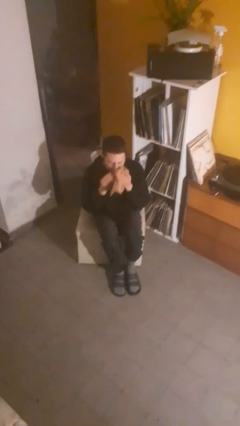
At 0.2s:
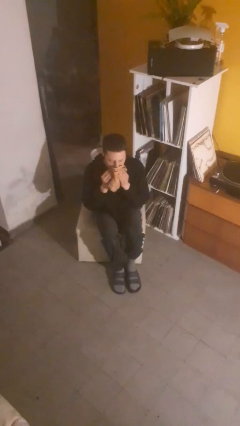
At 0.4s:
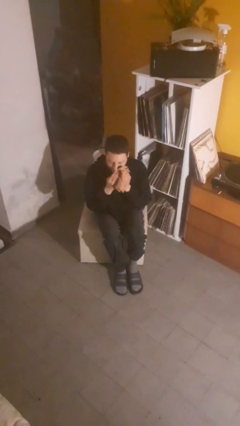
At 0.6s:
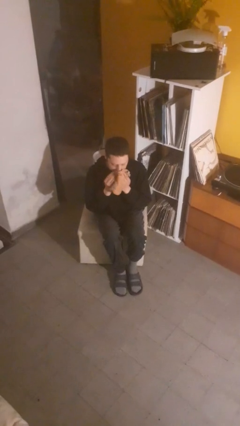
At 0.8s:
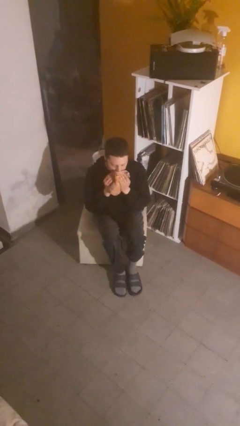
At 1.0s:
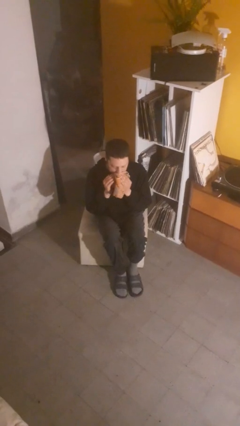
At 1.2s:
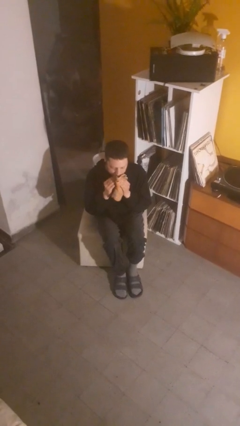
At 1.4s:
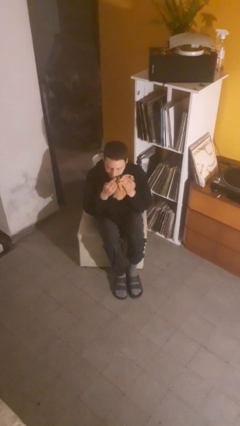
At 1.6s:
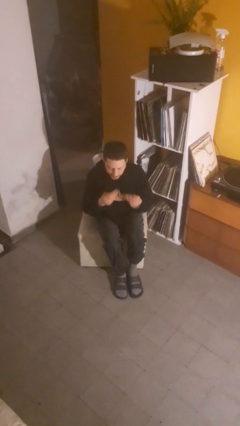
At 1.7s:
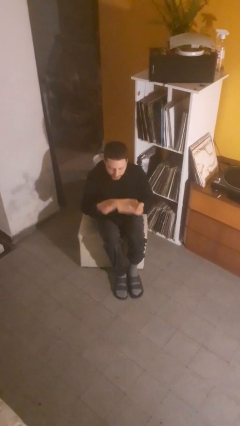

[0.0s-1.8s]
person wipes mouth with napkin

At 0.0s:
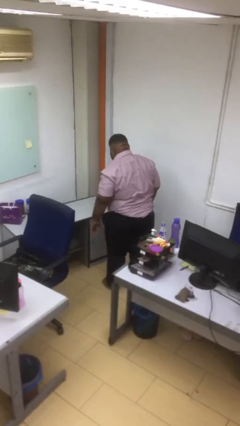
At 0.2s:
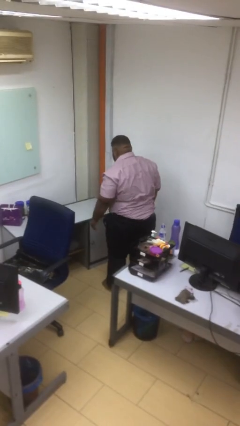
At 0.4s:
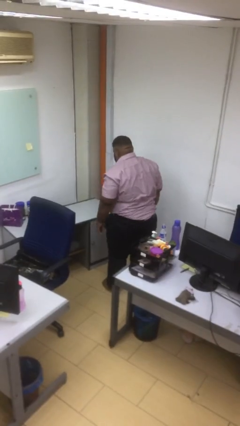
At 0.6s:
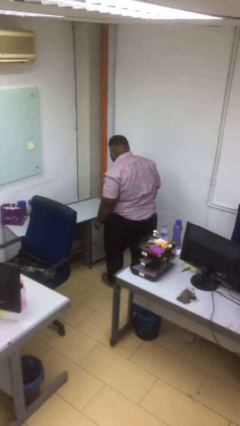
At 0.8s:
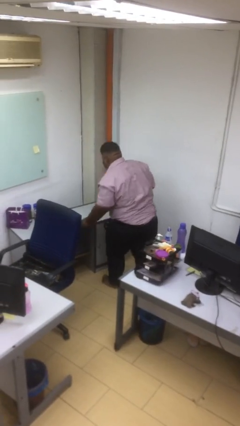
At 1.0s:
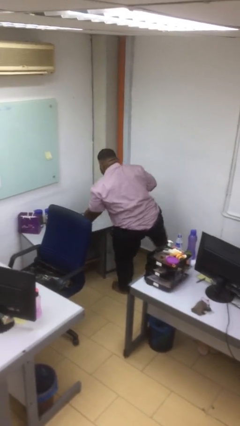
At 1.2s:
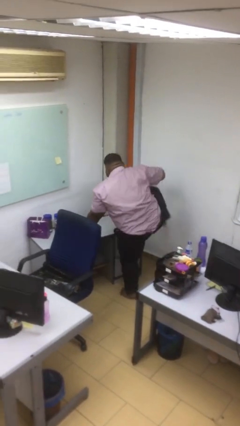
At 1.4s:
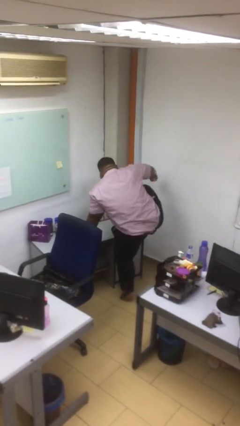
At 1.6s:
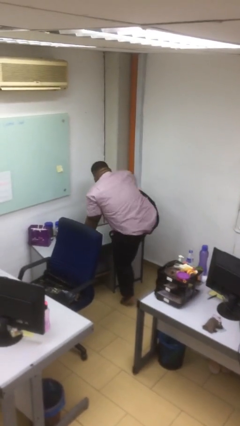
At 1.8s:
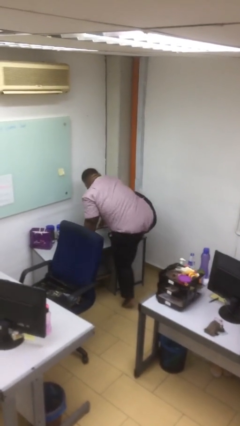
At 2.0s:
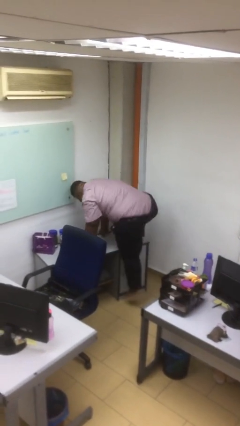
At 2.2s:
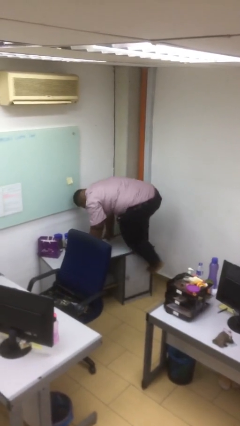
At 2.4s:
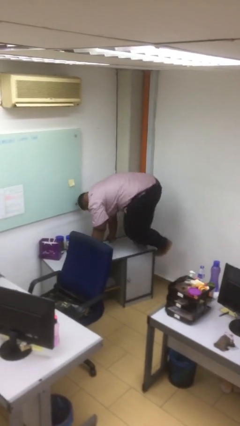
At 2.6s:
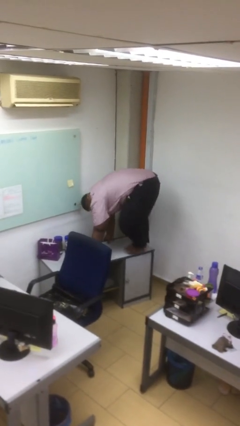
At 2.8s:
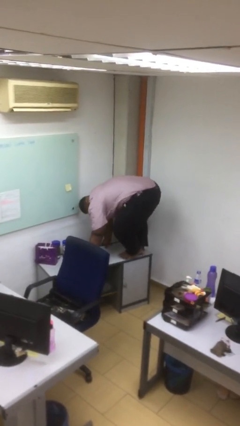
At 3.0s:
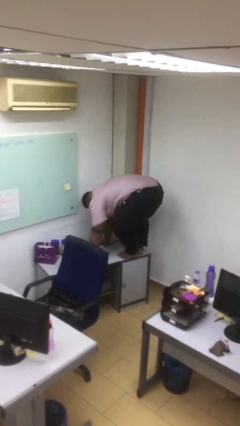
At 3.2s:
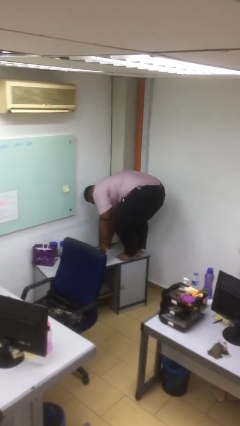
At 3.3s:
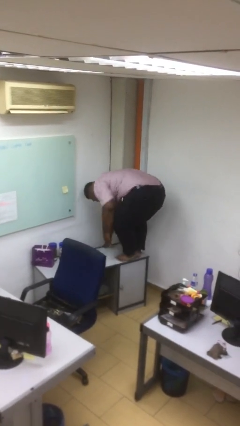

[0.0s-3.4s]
person climbs on table

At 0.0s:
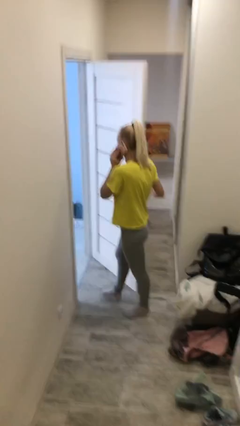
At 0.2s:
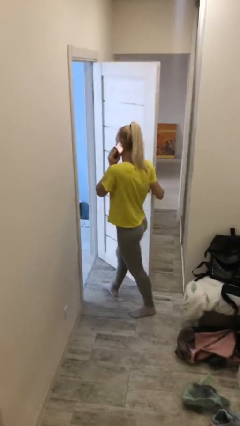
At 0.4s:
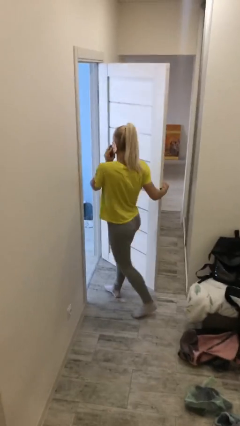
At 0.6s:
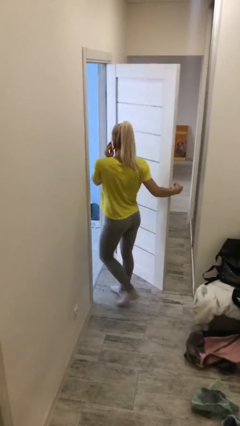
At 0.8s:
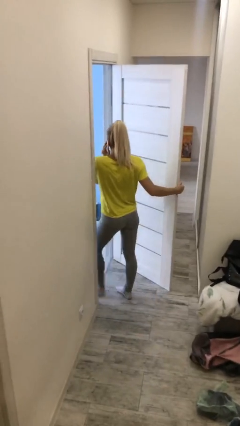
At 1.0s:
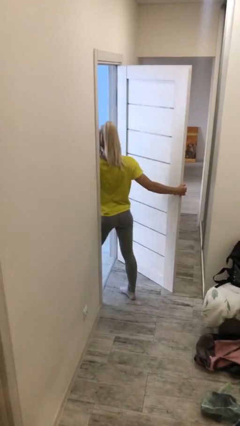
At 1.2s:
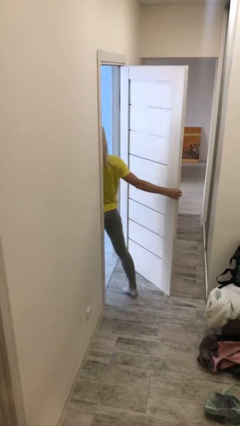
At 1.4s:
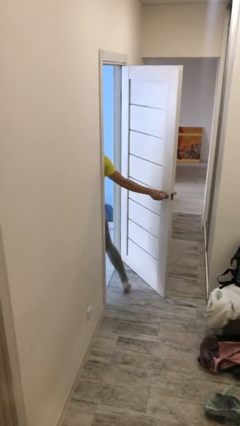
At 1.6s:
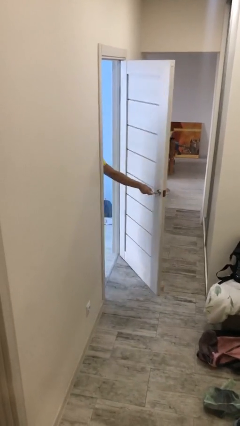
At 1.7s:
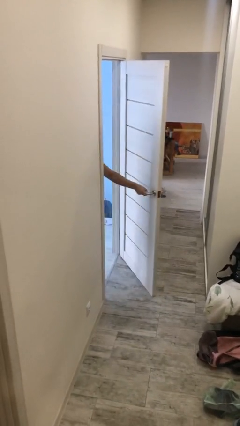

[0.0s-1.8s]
person exits scene through structure

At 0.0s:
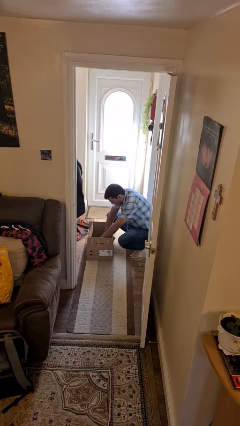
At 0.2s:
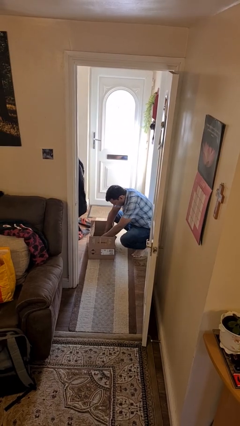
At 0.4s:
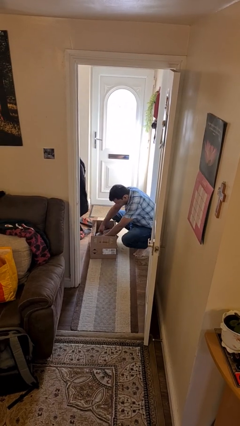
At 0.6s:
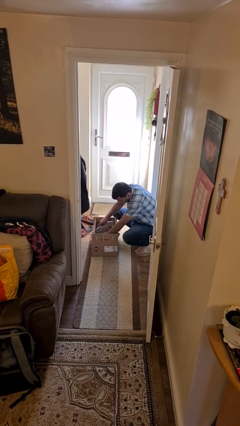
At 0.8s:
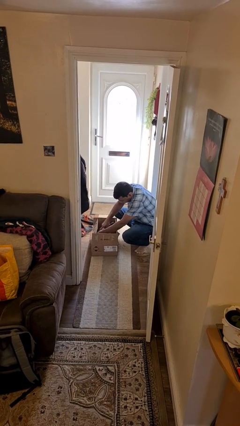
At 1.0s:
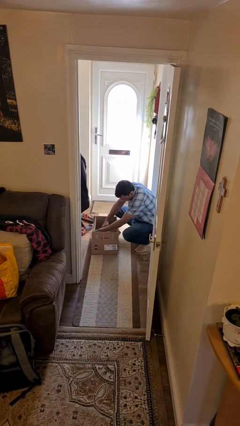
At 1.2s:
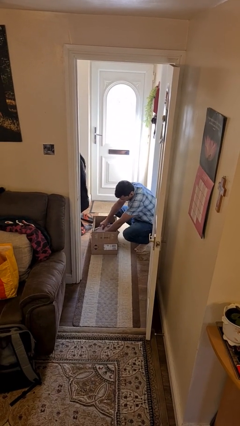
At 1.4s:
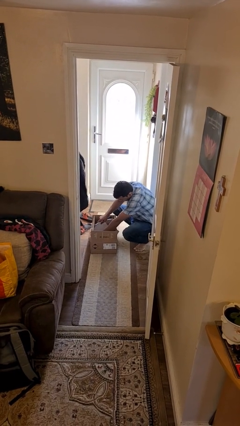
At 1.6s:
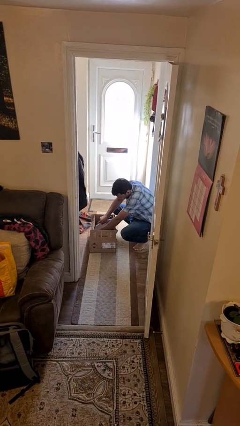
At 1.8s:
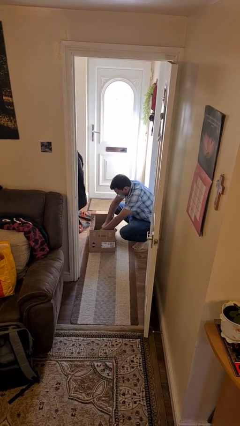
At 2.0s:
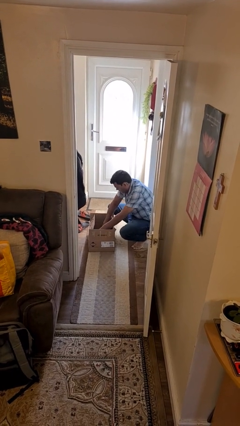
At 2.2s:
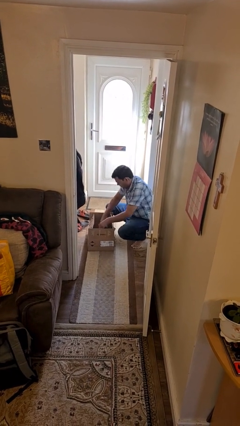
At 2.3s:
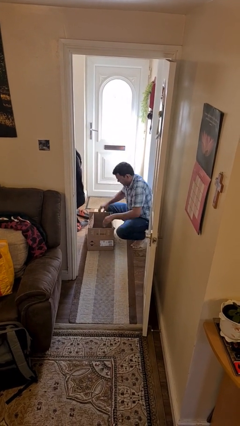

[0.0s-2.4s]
person searches in box

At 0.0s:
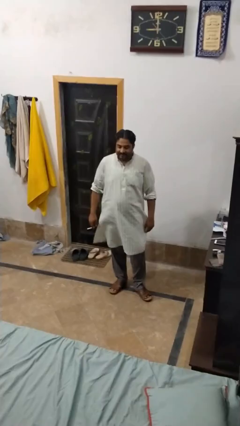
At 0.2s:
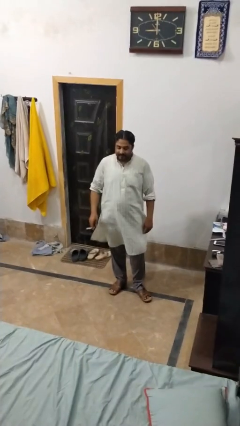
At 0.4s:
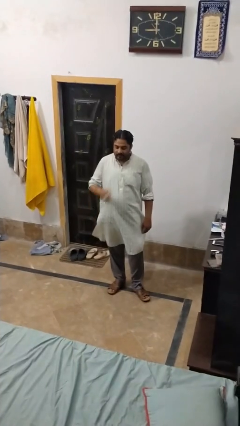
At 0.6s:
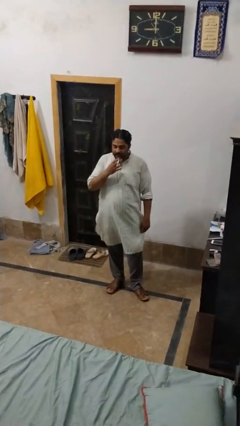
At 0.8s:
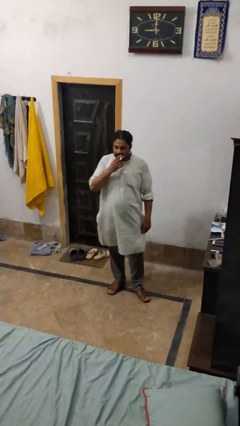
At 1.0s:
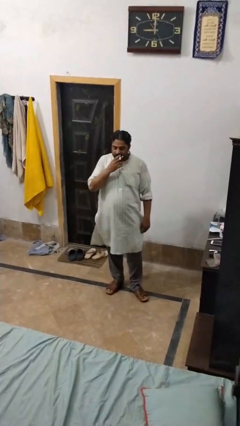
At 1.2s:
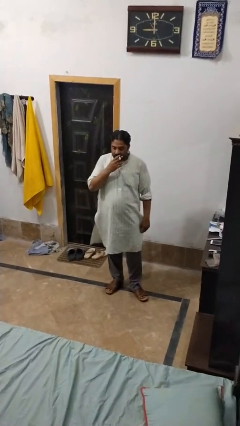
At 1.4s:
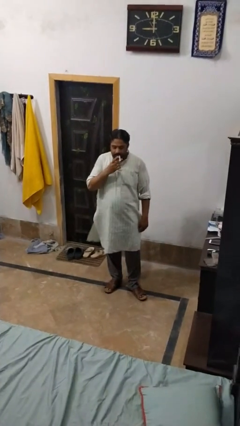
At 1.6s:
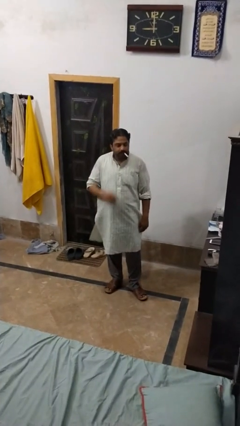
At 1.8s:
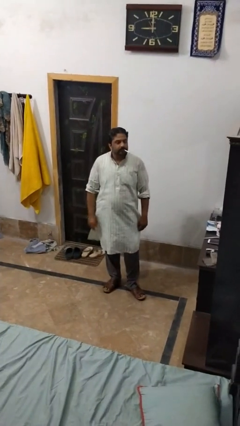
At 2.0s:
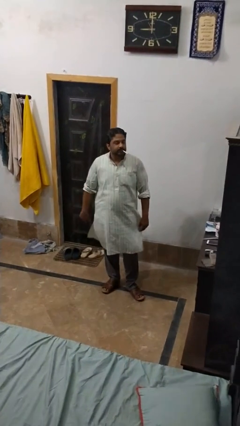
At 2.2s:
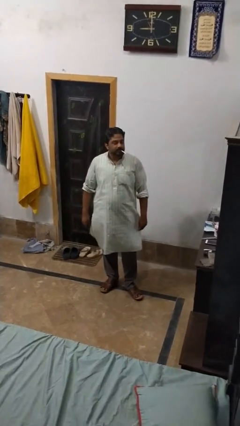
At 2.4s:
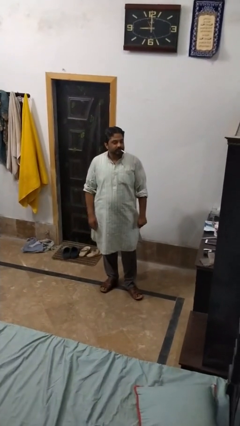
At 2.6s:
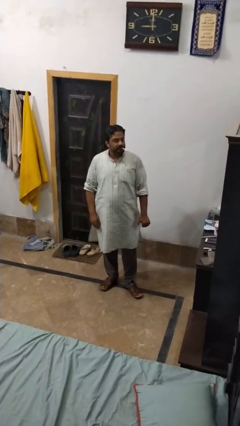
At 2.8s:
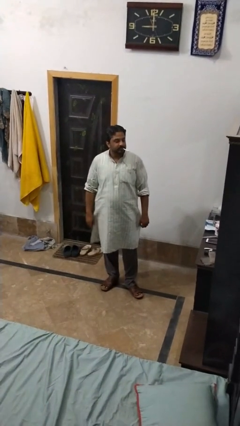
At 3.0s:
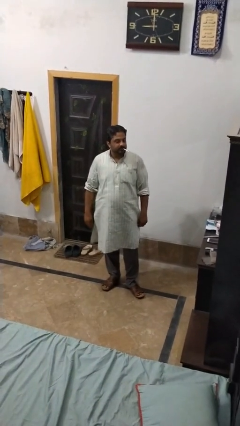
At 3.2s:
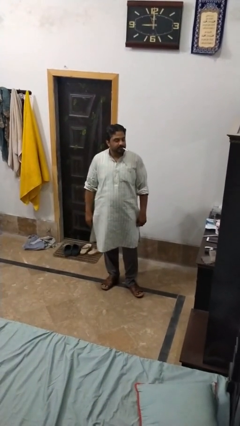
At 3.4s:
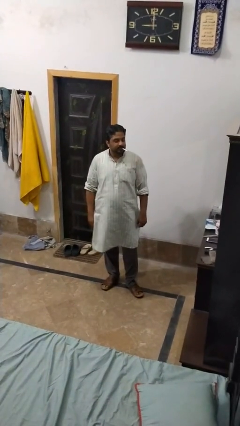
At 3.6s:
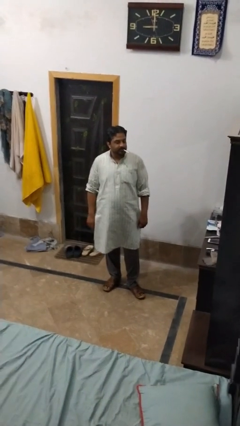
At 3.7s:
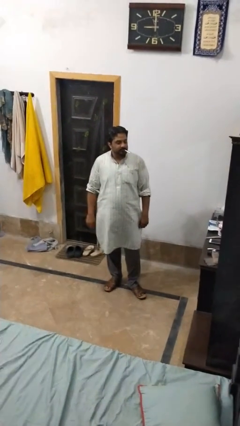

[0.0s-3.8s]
person vapes

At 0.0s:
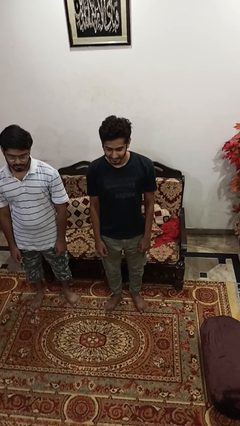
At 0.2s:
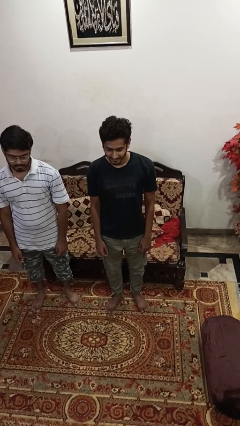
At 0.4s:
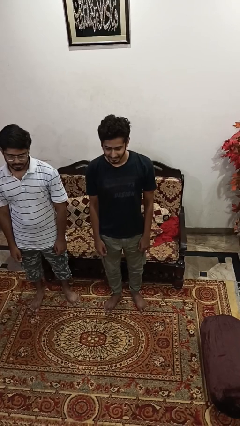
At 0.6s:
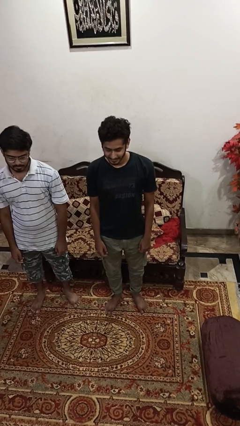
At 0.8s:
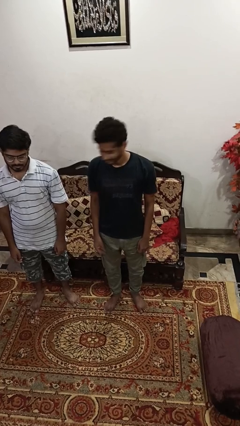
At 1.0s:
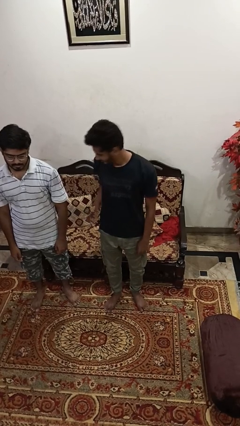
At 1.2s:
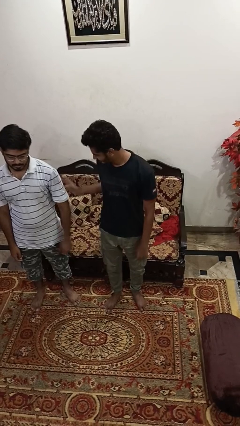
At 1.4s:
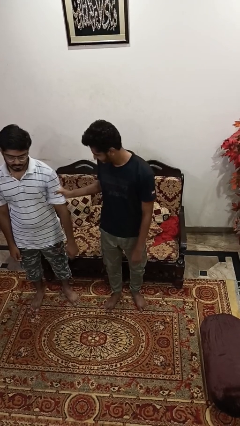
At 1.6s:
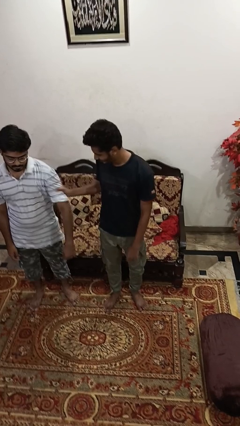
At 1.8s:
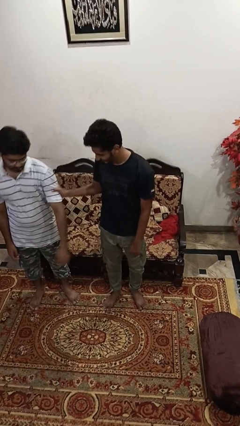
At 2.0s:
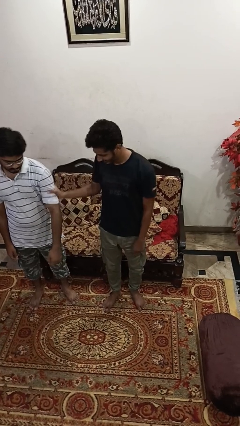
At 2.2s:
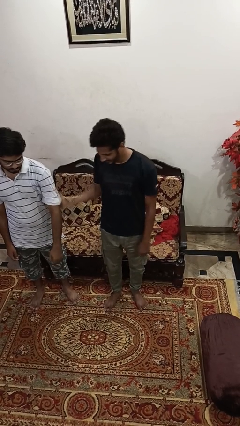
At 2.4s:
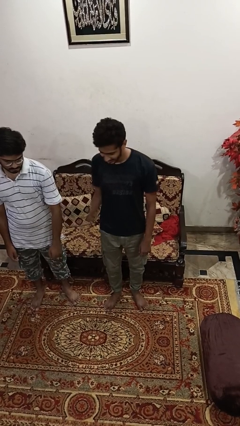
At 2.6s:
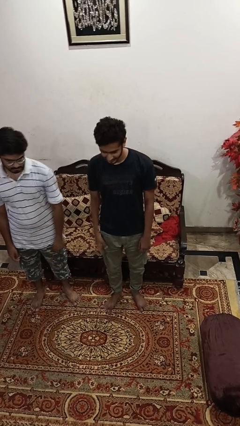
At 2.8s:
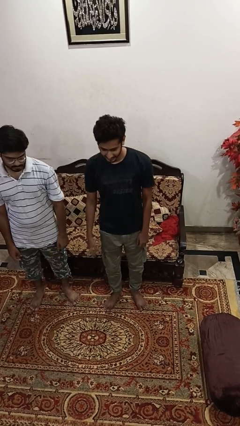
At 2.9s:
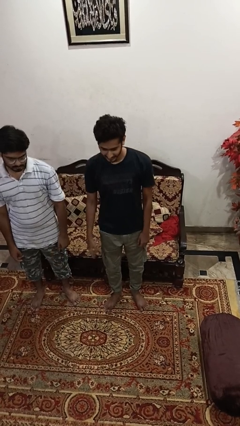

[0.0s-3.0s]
person grabs person by bicep

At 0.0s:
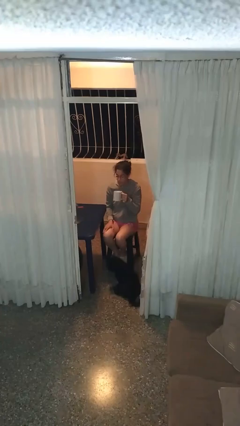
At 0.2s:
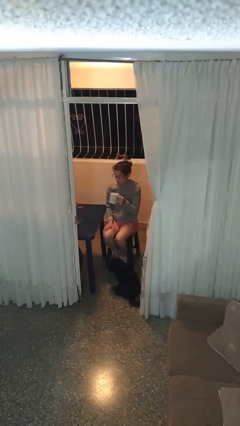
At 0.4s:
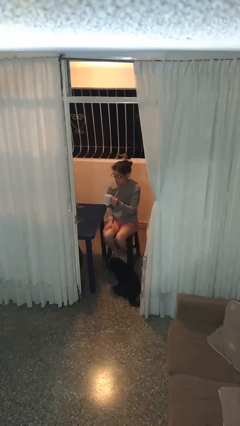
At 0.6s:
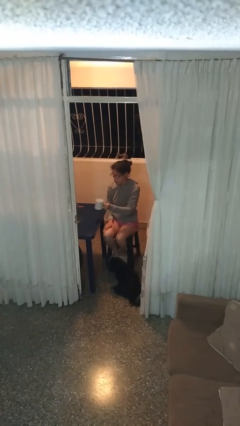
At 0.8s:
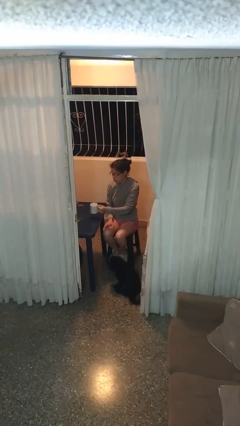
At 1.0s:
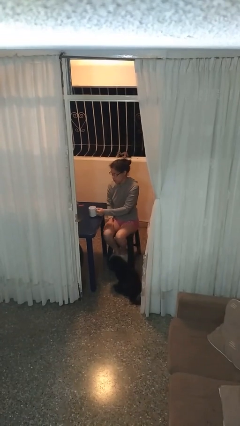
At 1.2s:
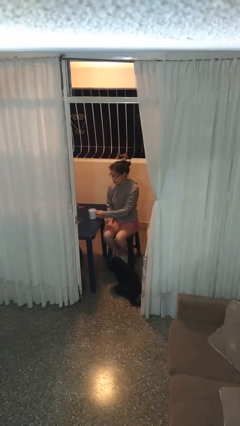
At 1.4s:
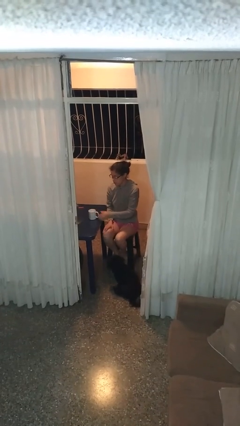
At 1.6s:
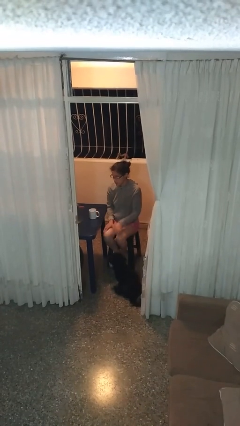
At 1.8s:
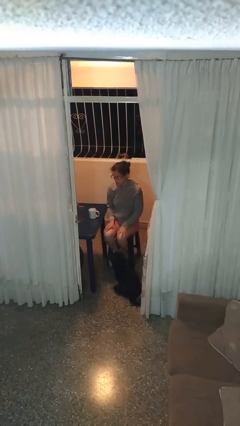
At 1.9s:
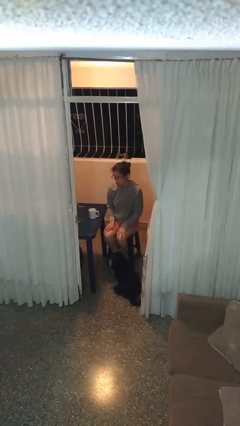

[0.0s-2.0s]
person puts down object on table
